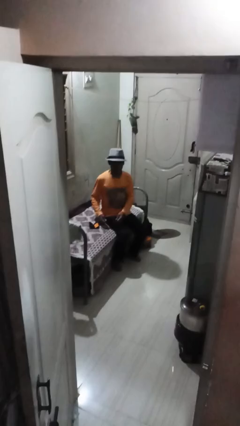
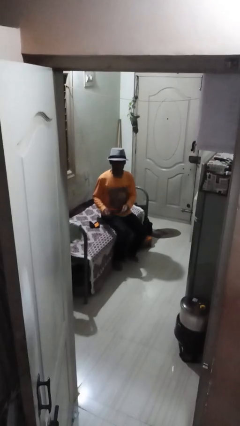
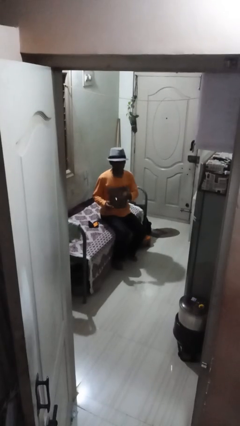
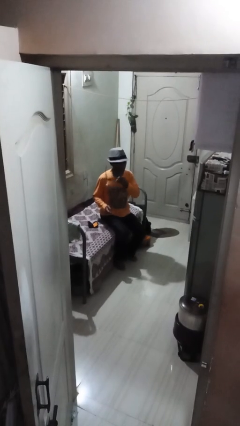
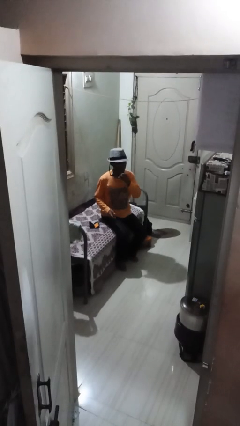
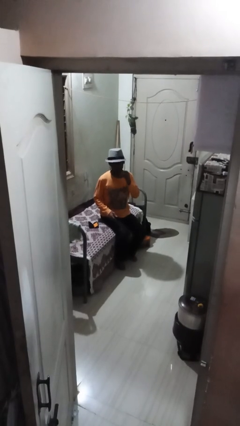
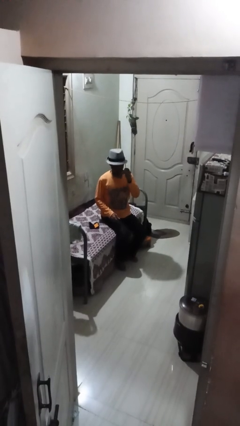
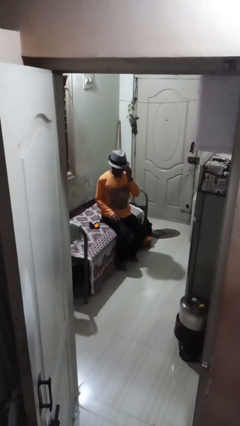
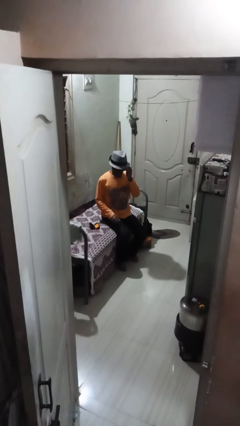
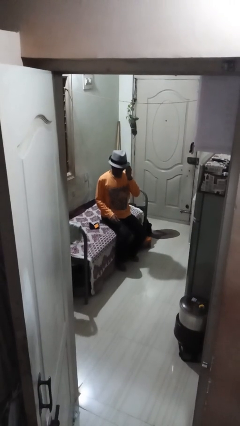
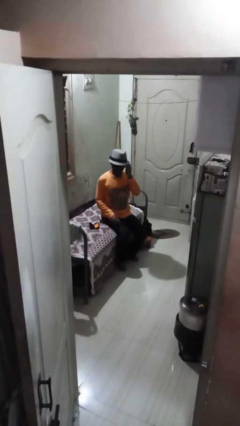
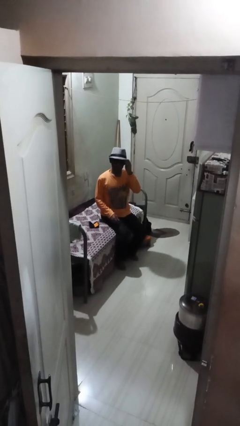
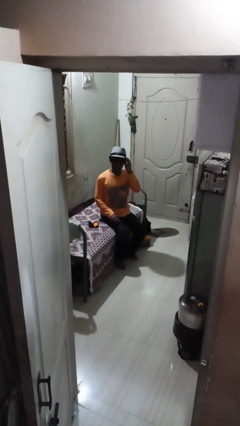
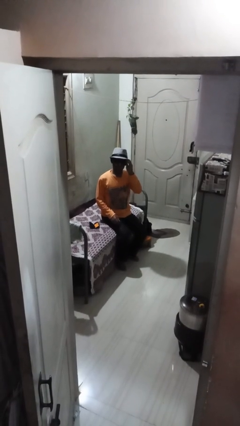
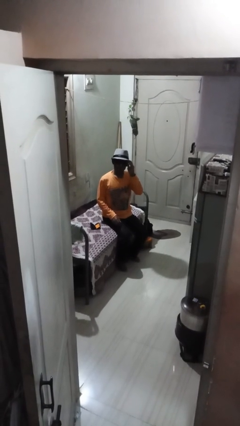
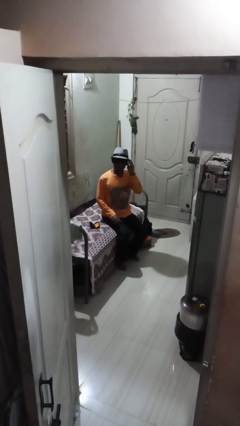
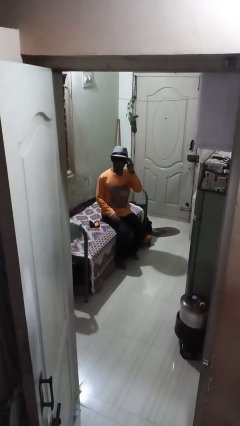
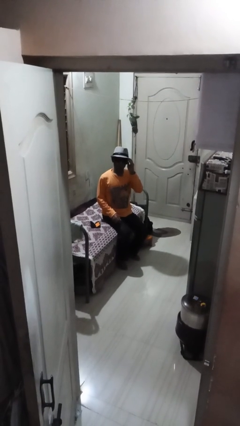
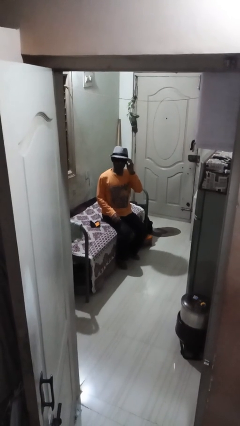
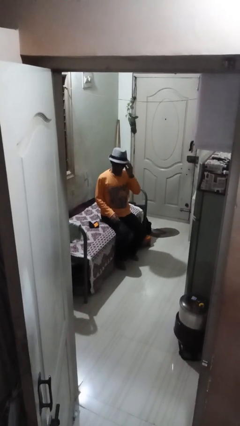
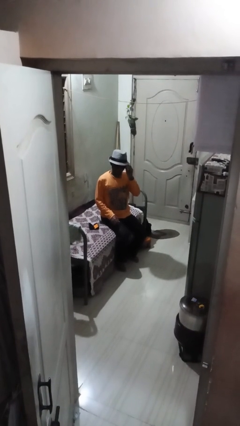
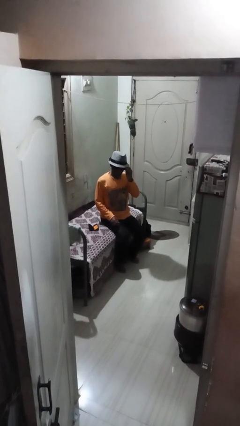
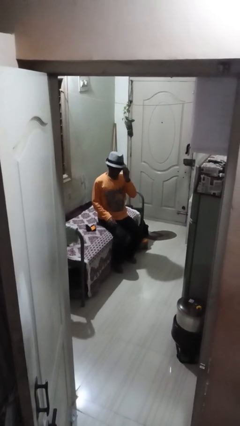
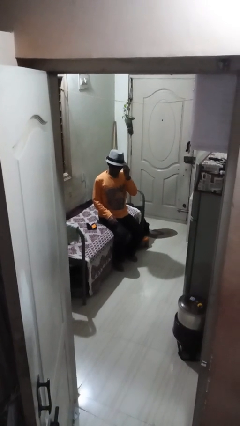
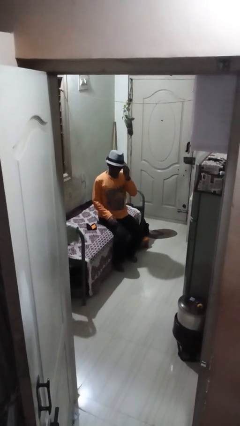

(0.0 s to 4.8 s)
person puts on sunglasses

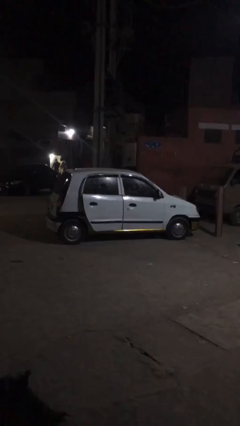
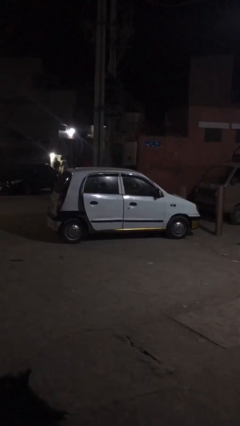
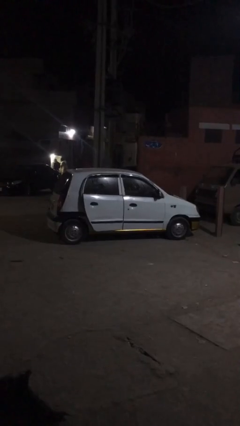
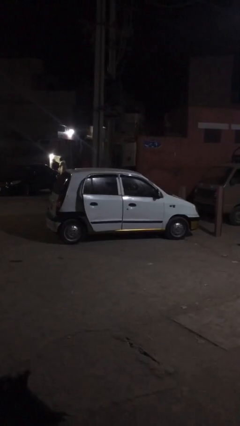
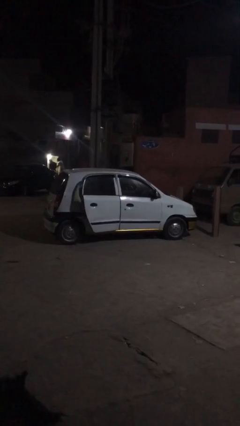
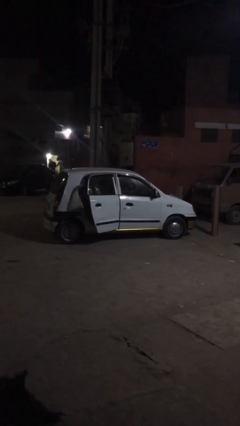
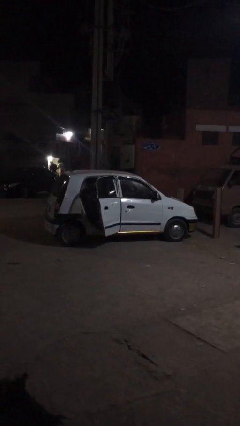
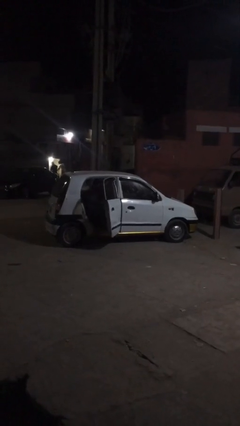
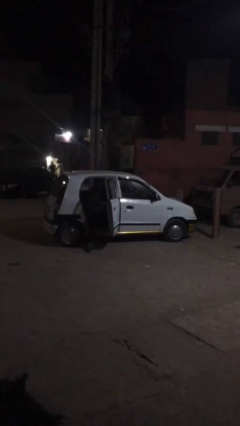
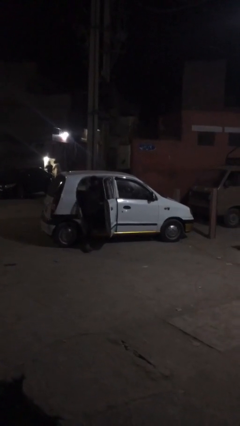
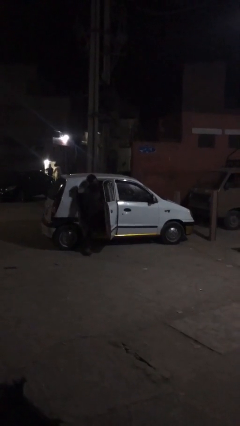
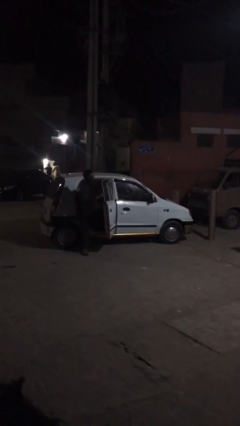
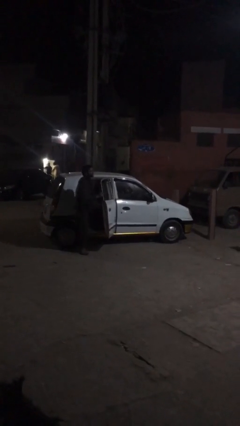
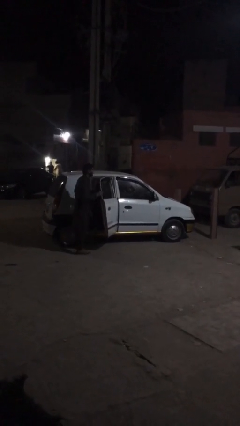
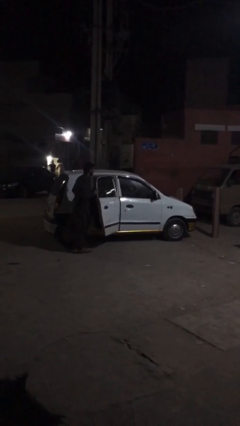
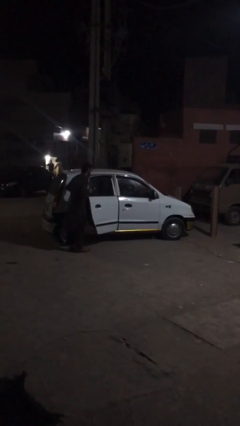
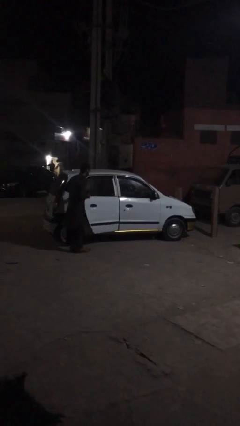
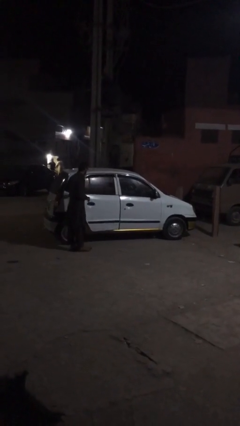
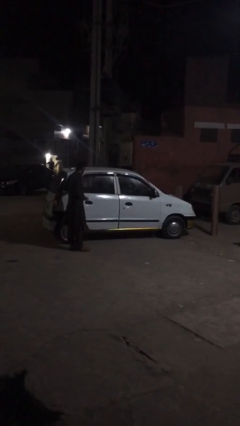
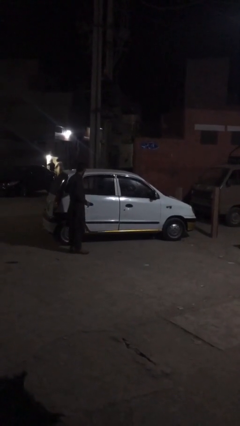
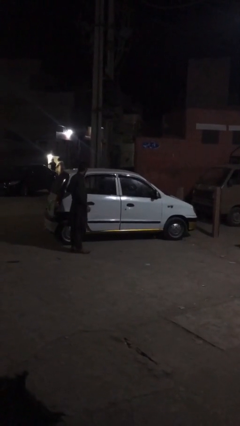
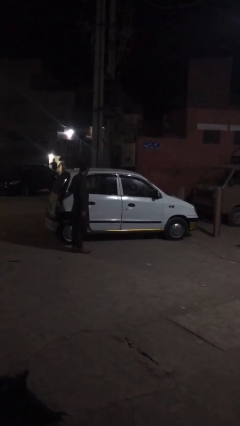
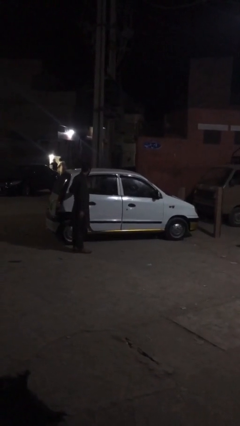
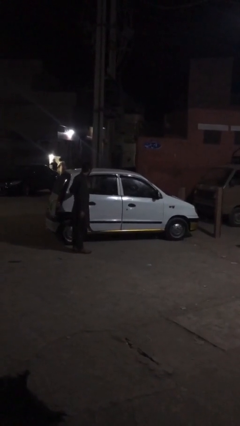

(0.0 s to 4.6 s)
car drops off person

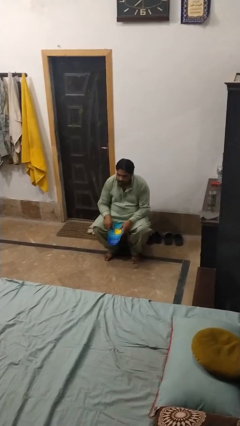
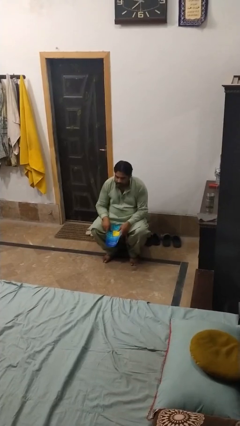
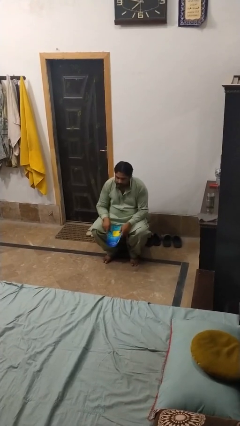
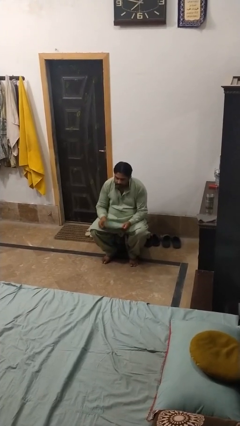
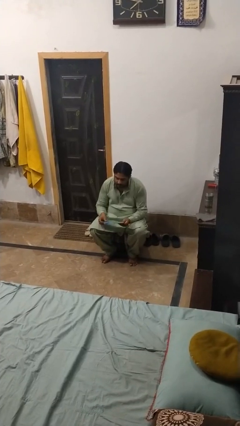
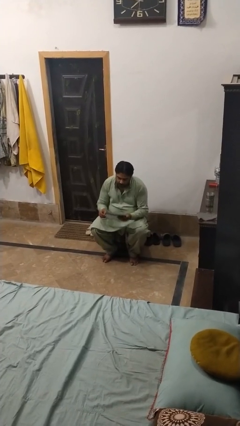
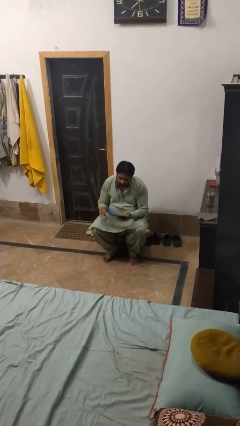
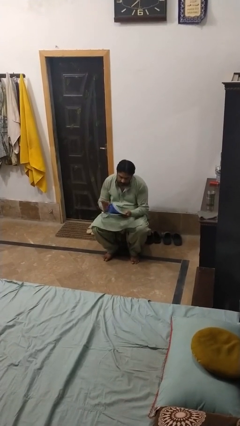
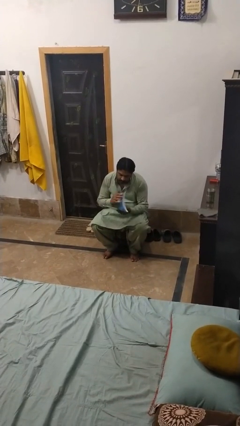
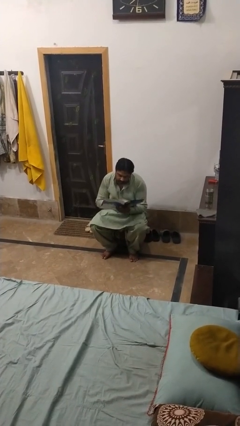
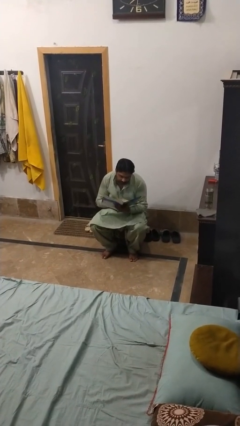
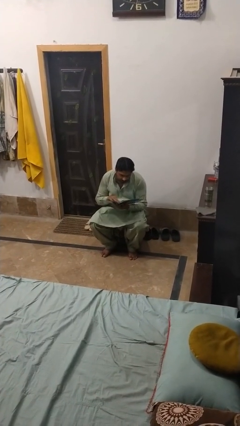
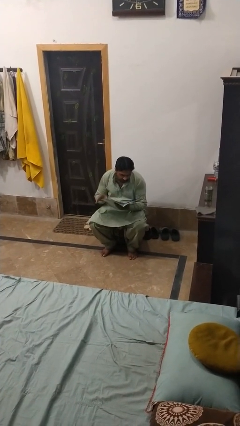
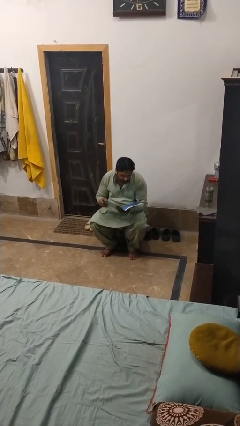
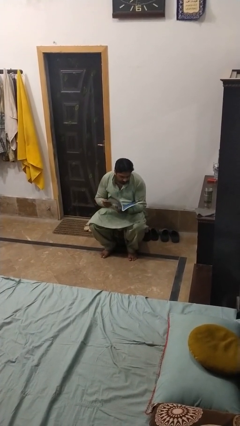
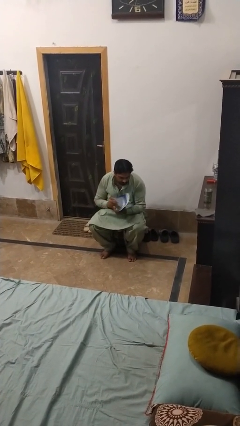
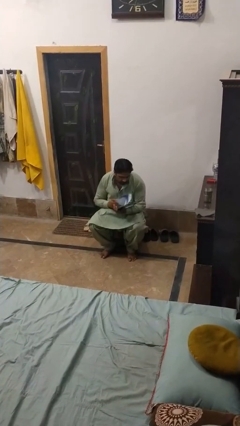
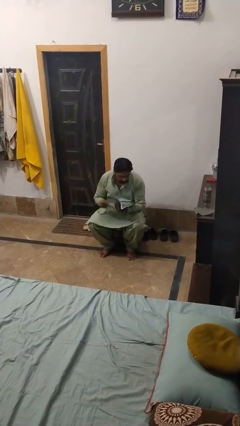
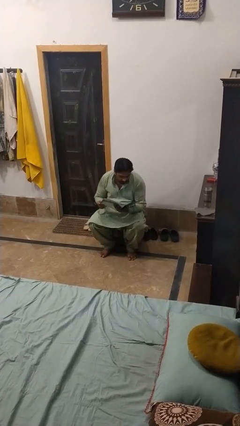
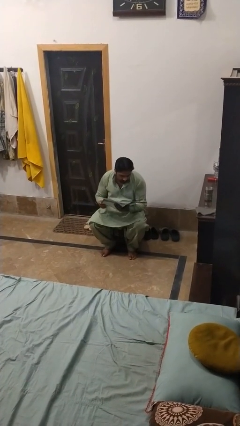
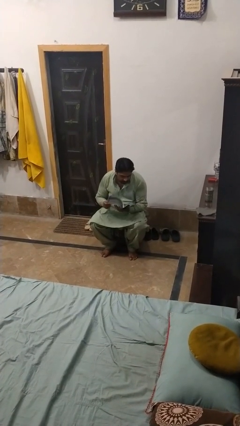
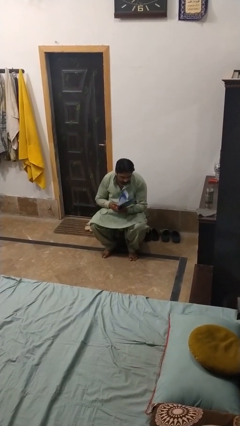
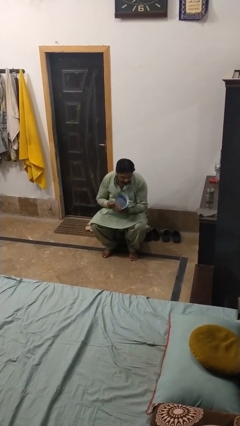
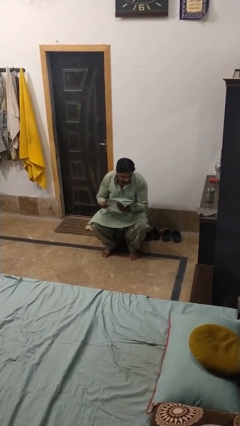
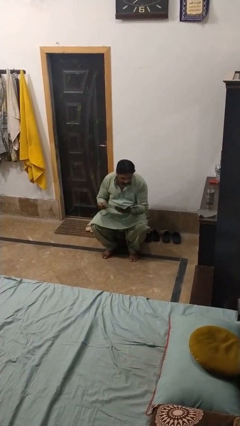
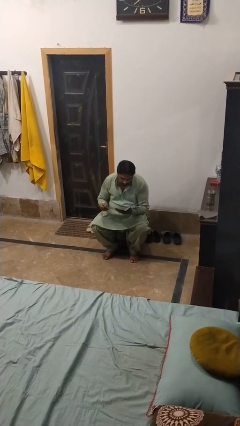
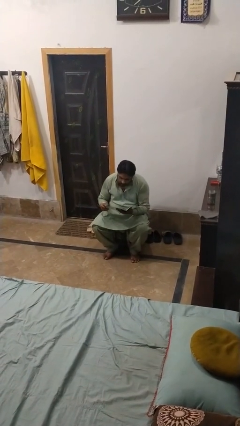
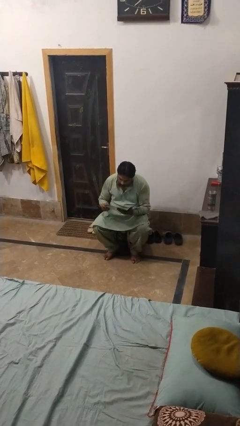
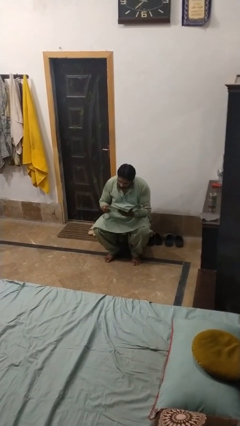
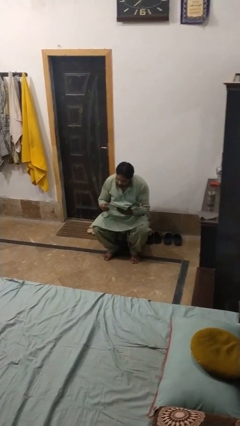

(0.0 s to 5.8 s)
person reads magazine

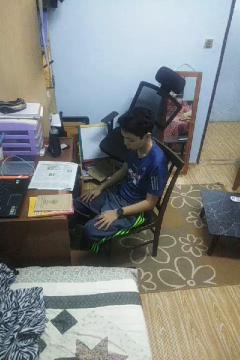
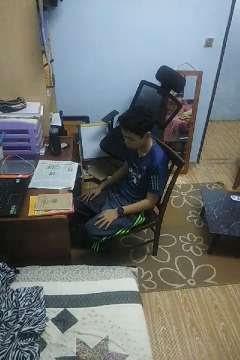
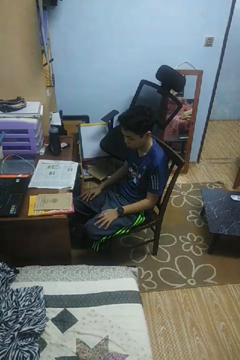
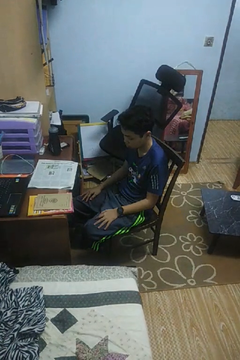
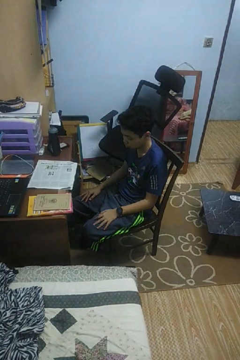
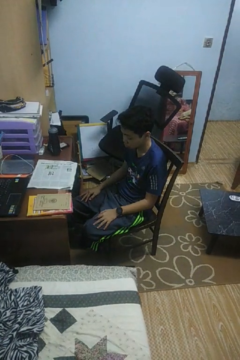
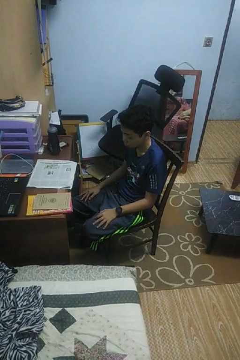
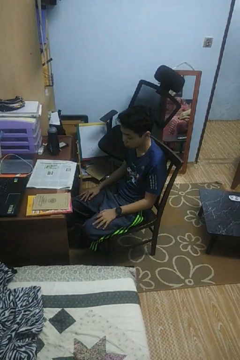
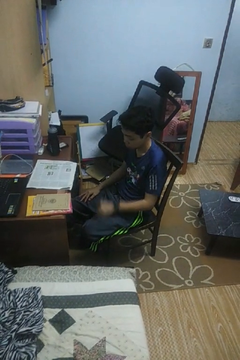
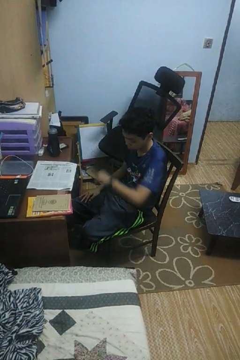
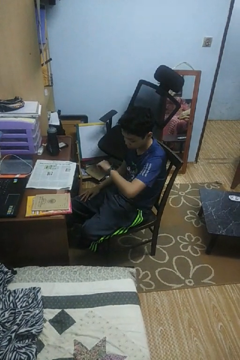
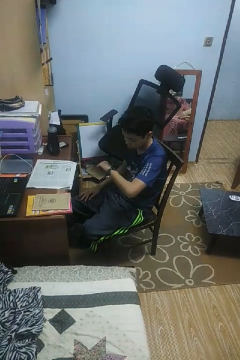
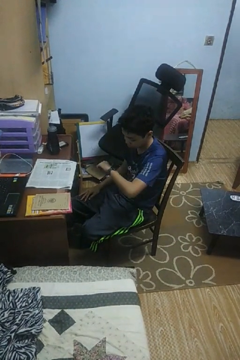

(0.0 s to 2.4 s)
person looks at wristwatch

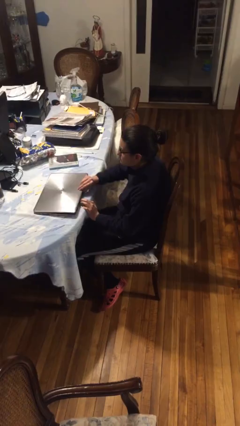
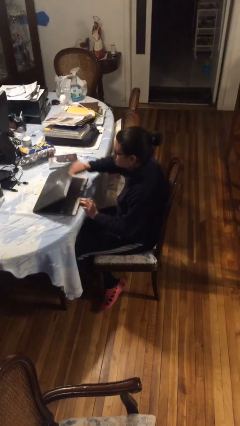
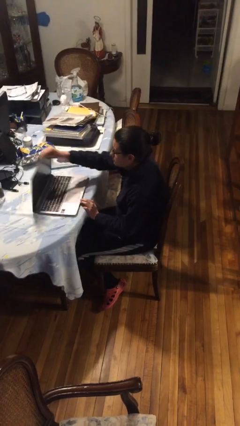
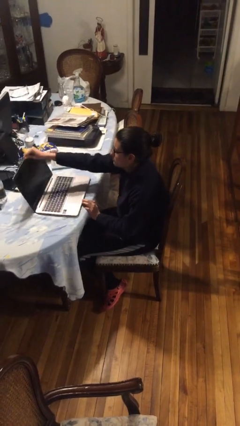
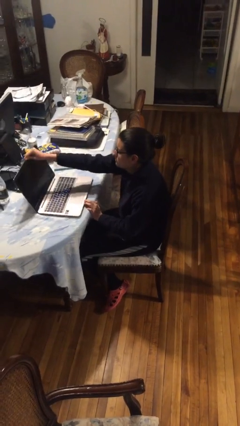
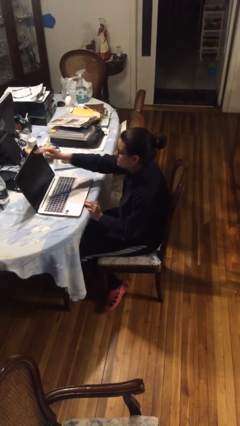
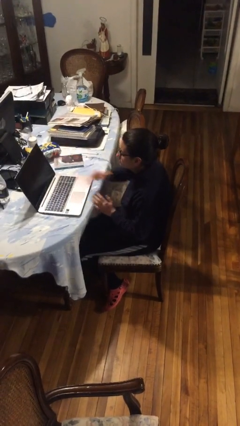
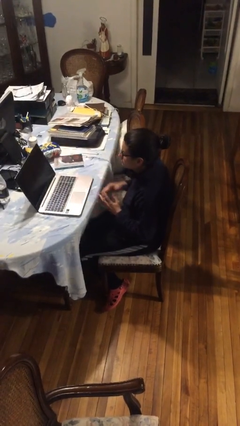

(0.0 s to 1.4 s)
person opens laptop
